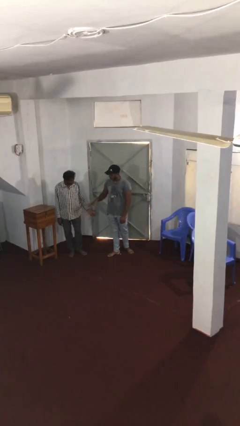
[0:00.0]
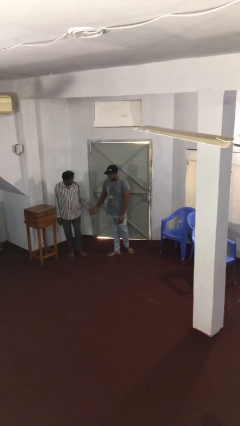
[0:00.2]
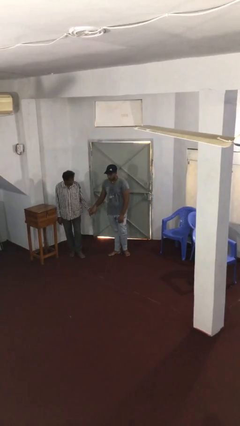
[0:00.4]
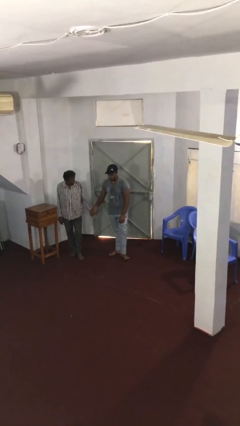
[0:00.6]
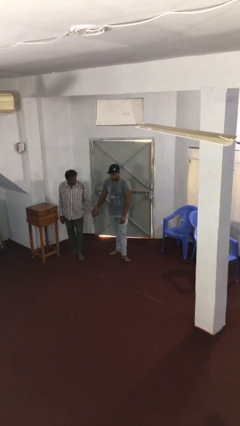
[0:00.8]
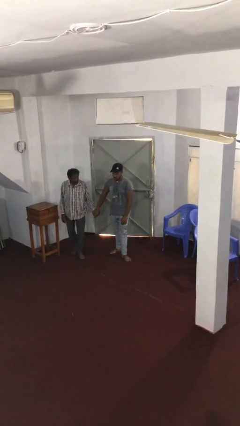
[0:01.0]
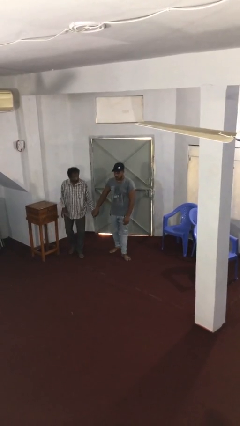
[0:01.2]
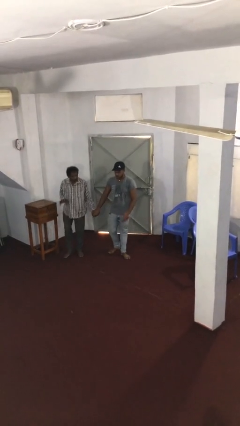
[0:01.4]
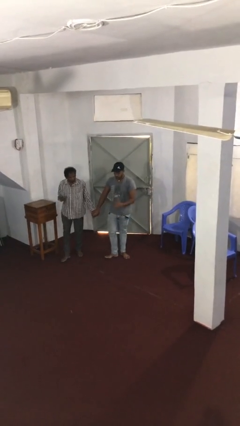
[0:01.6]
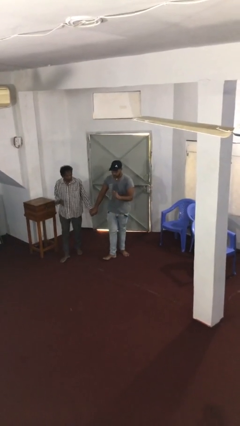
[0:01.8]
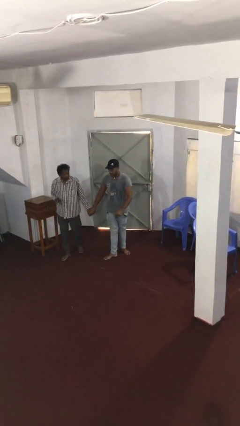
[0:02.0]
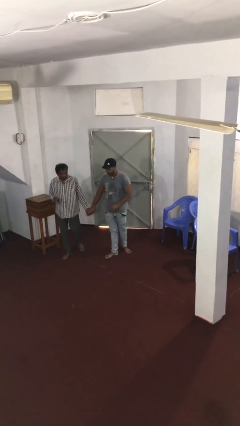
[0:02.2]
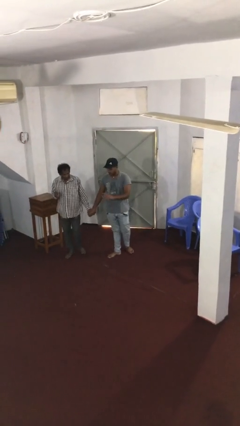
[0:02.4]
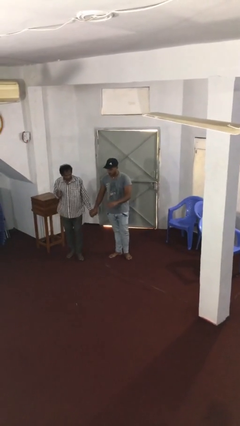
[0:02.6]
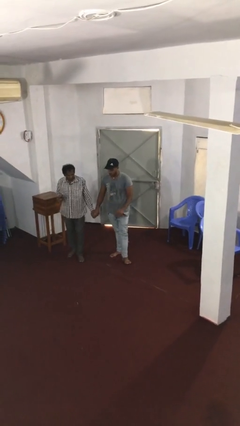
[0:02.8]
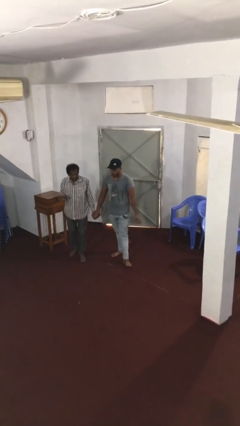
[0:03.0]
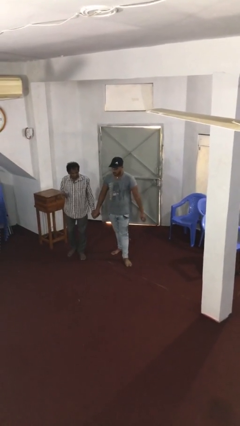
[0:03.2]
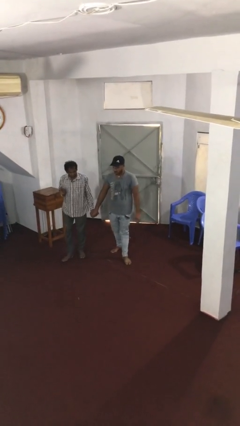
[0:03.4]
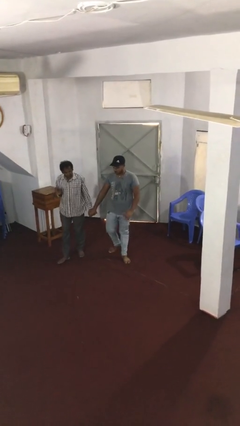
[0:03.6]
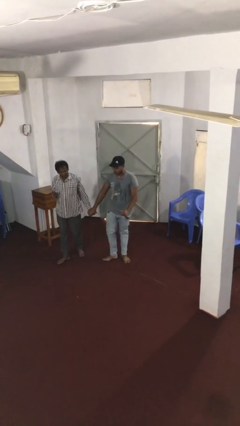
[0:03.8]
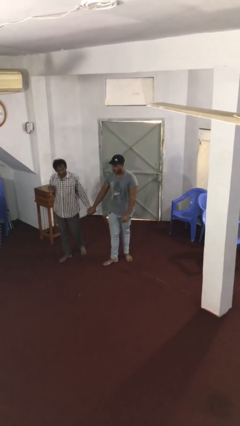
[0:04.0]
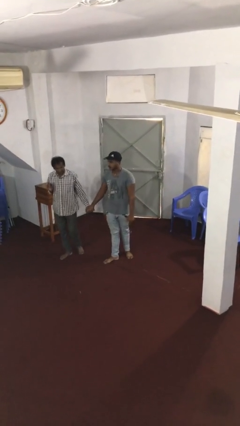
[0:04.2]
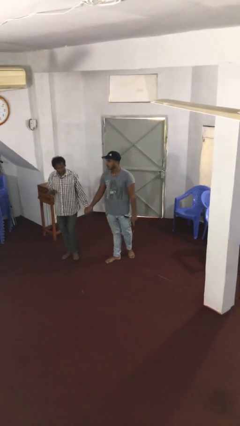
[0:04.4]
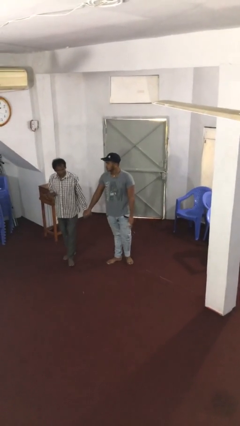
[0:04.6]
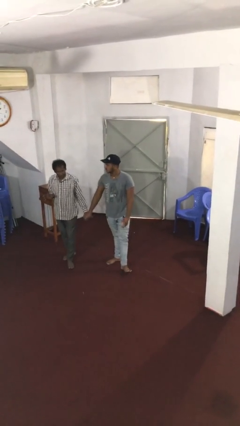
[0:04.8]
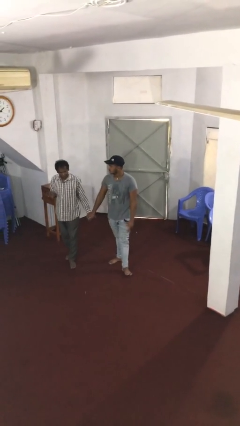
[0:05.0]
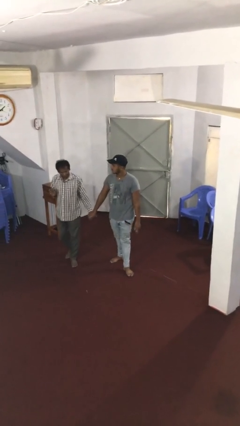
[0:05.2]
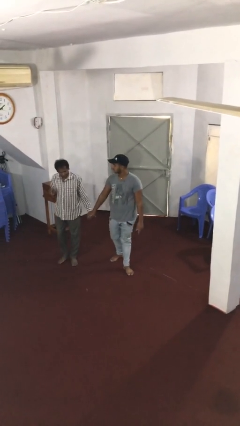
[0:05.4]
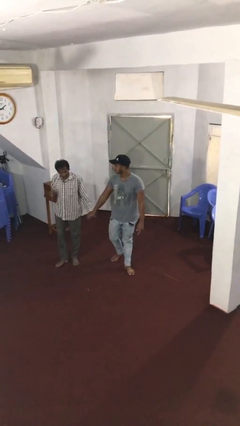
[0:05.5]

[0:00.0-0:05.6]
person holds hand

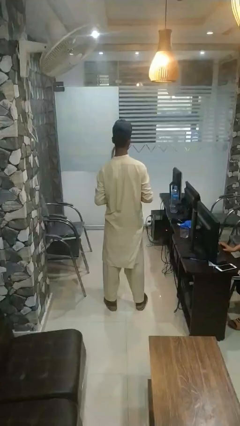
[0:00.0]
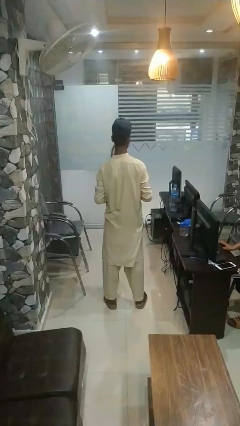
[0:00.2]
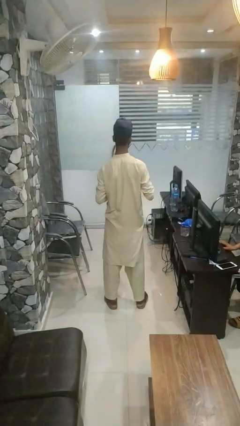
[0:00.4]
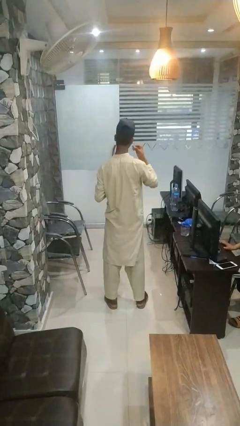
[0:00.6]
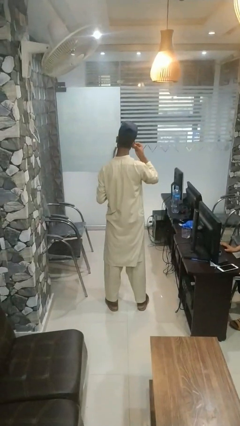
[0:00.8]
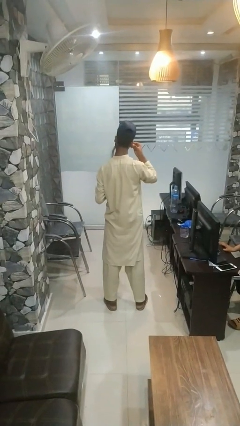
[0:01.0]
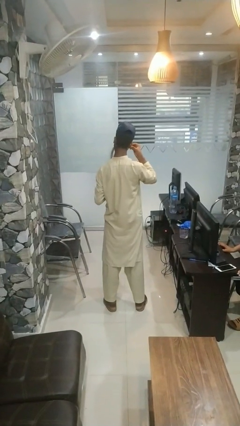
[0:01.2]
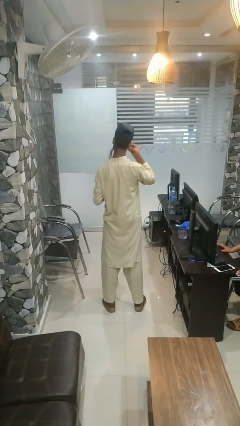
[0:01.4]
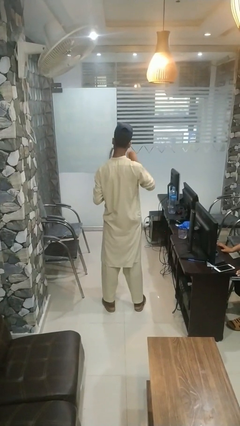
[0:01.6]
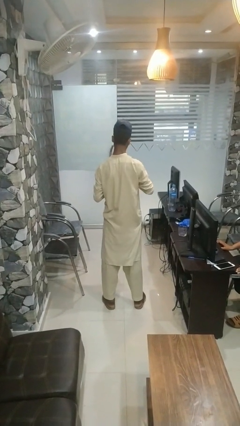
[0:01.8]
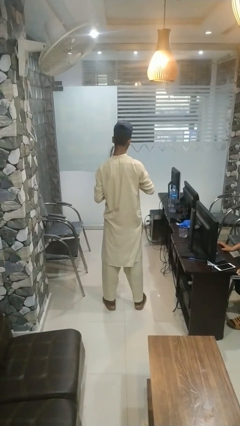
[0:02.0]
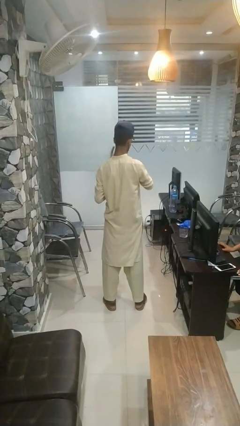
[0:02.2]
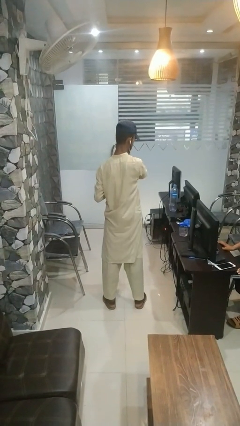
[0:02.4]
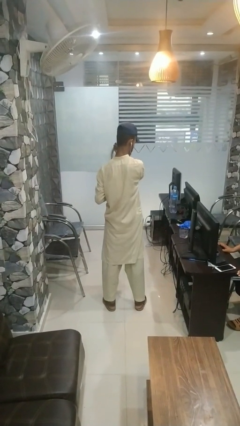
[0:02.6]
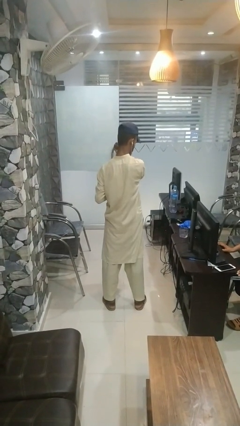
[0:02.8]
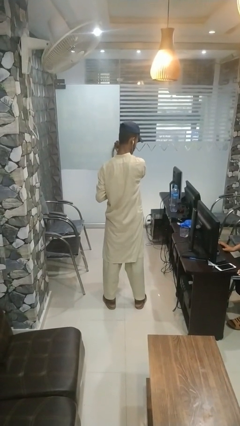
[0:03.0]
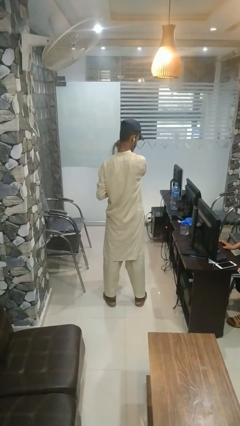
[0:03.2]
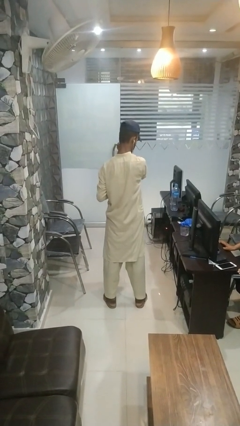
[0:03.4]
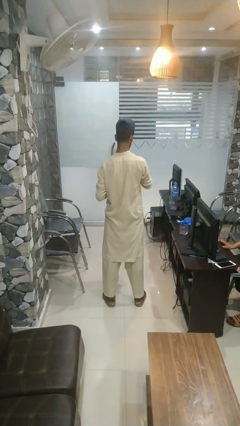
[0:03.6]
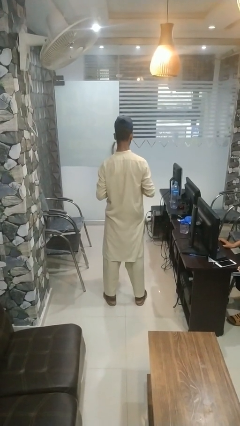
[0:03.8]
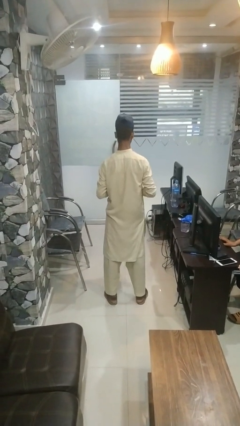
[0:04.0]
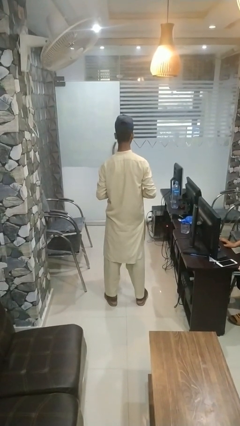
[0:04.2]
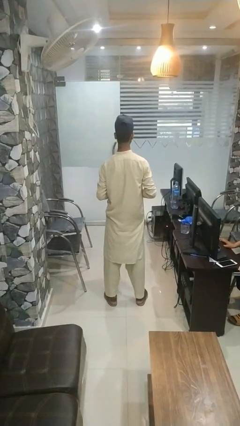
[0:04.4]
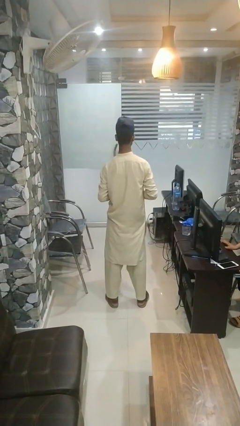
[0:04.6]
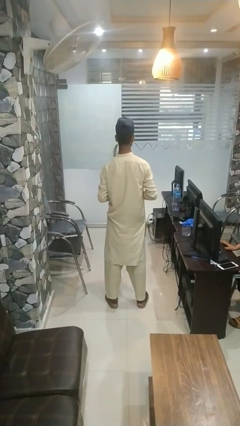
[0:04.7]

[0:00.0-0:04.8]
person puts on headphones

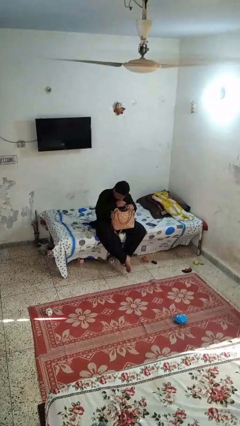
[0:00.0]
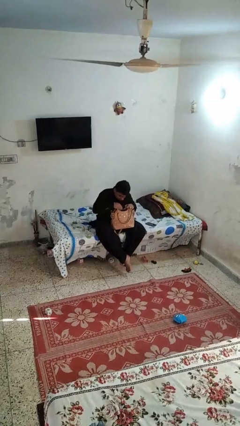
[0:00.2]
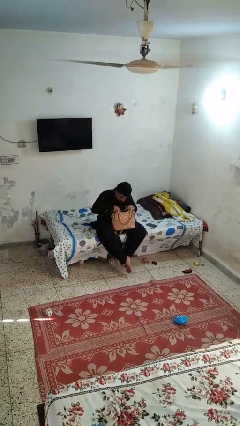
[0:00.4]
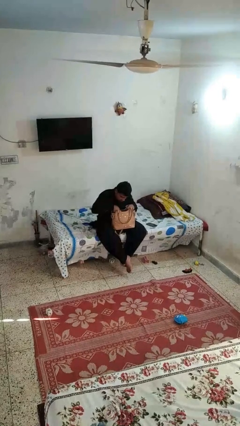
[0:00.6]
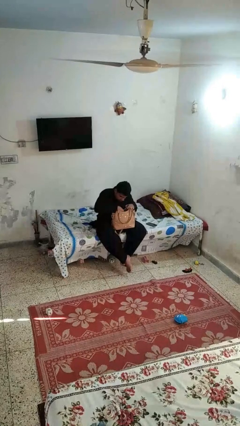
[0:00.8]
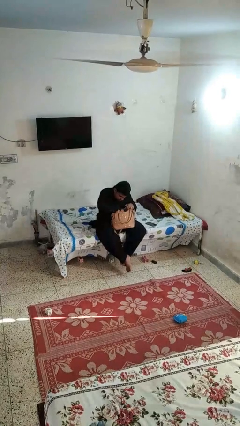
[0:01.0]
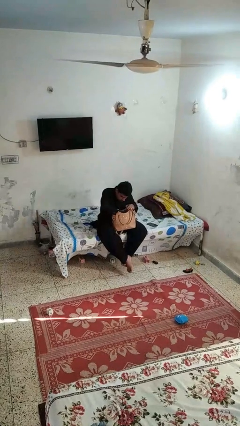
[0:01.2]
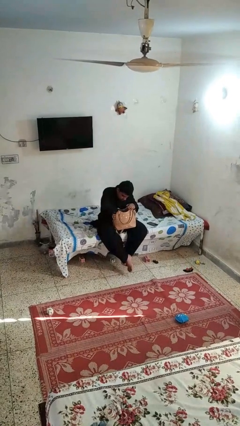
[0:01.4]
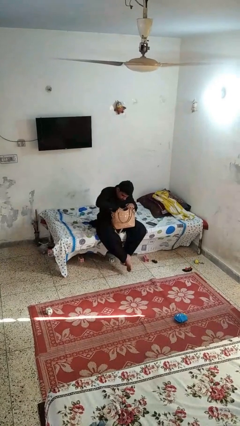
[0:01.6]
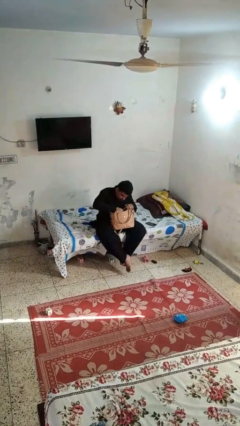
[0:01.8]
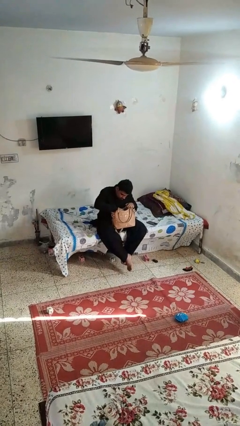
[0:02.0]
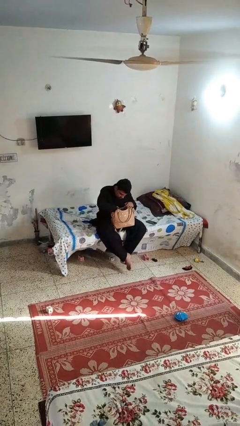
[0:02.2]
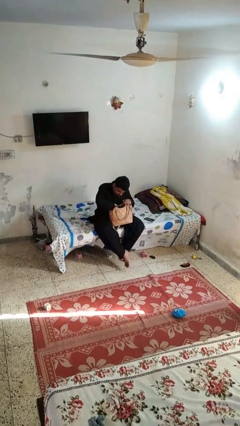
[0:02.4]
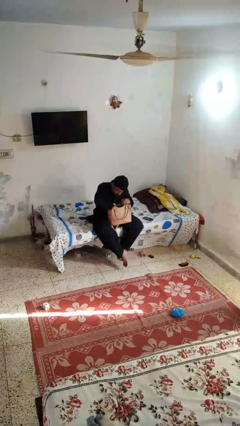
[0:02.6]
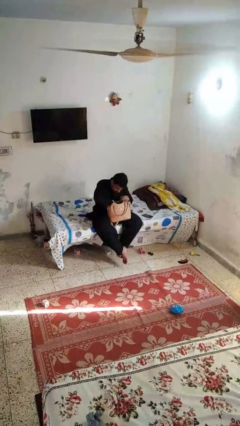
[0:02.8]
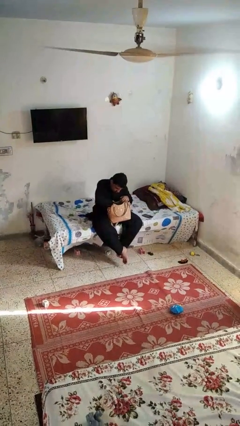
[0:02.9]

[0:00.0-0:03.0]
person searches in purse

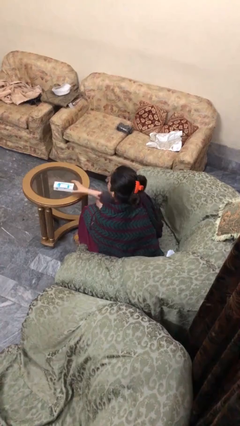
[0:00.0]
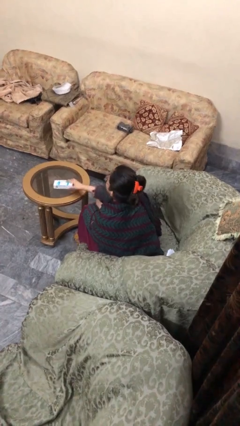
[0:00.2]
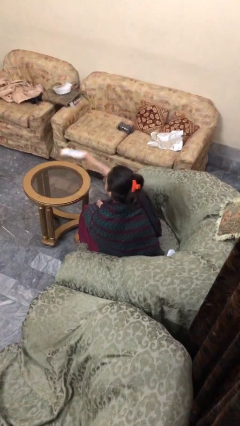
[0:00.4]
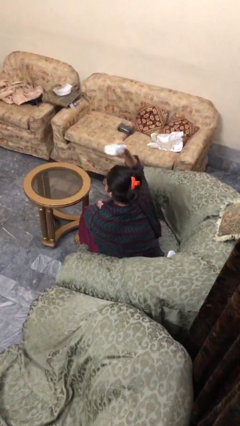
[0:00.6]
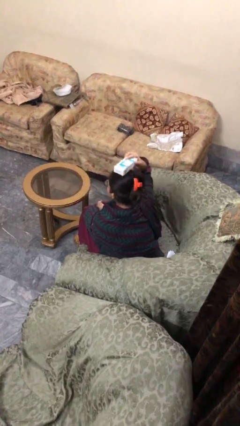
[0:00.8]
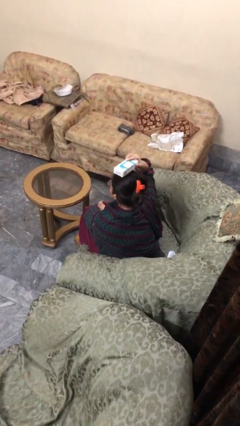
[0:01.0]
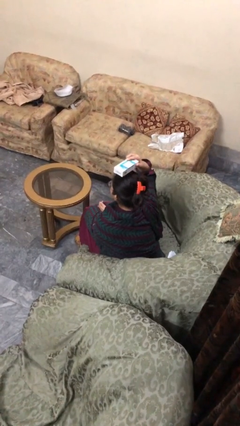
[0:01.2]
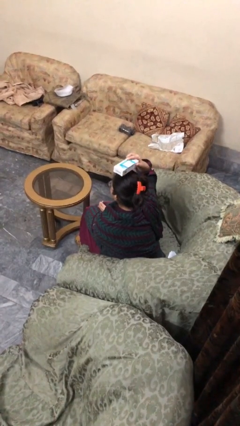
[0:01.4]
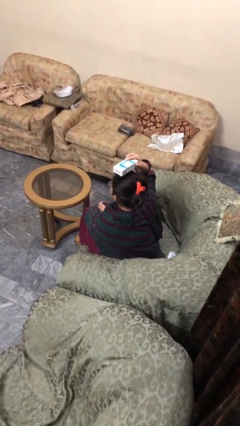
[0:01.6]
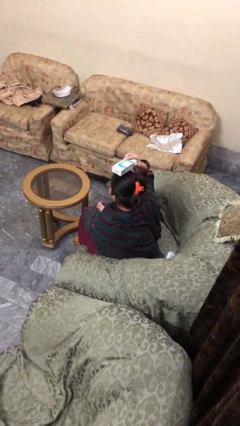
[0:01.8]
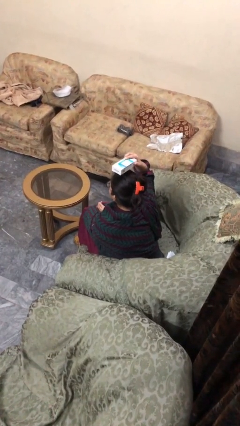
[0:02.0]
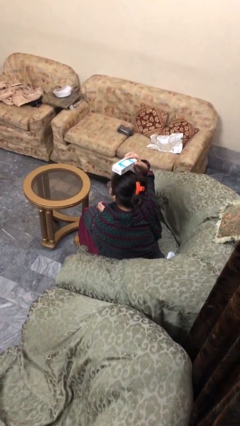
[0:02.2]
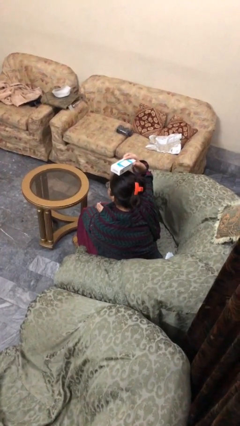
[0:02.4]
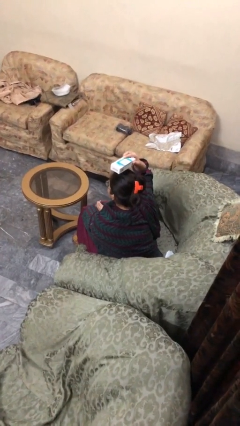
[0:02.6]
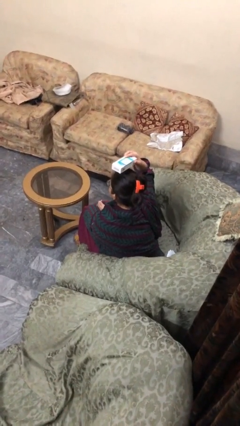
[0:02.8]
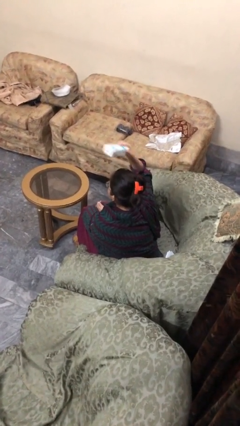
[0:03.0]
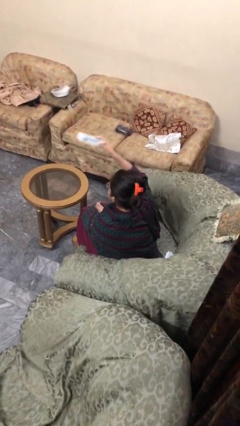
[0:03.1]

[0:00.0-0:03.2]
person holds object above head

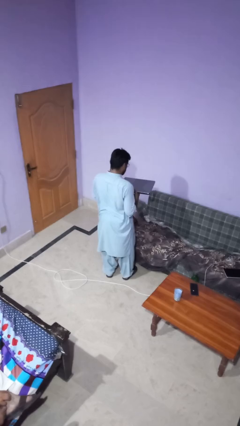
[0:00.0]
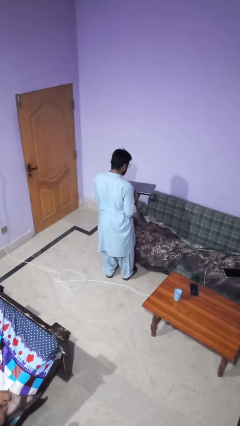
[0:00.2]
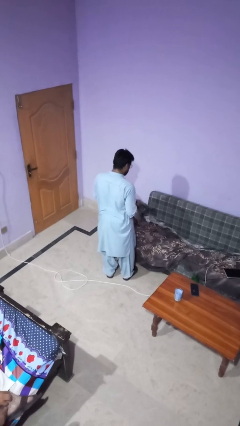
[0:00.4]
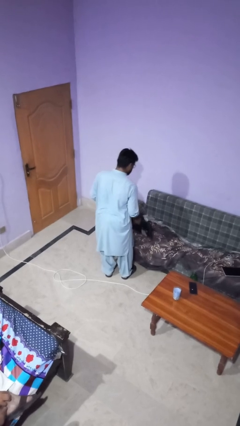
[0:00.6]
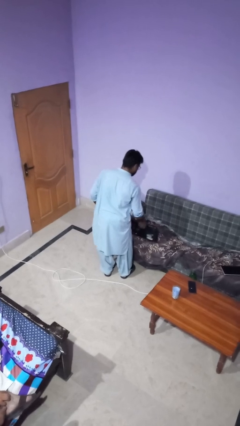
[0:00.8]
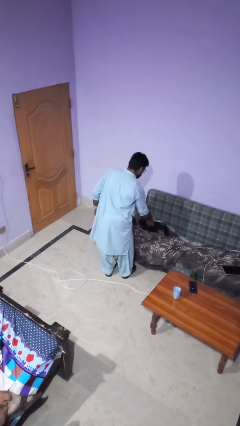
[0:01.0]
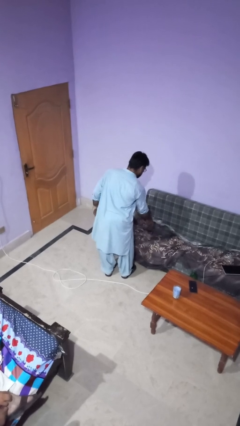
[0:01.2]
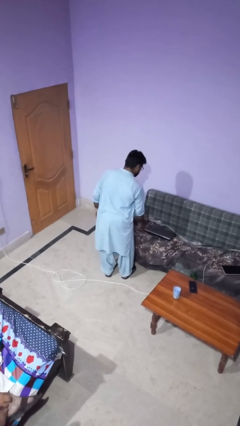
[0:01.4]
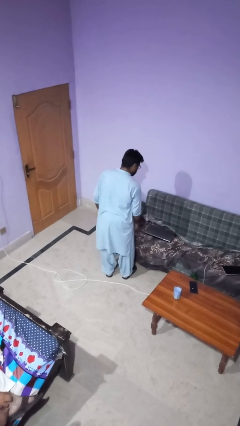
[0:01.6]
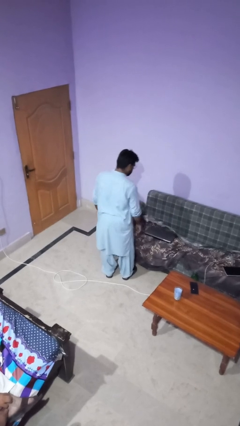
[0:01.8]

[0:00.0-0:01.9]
person puts down object on couch
